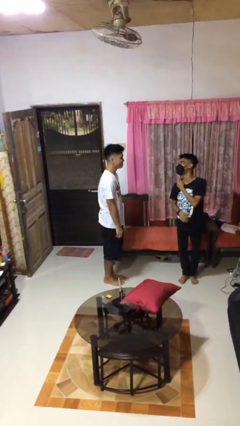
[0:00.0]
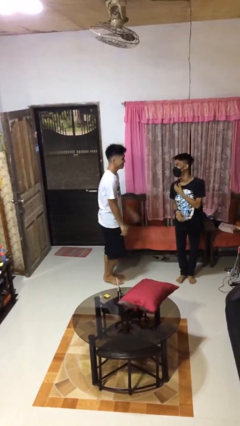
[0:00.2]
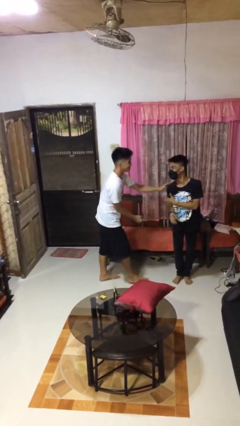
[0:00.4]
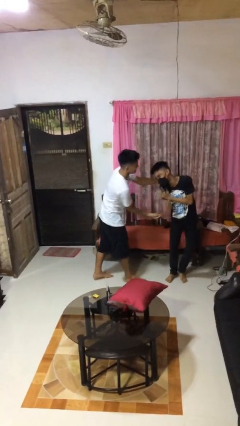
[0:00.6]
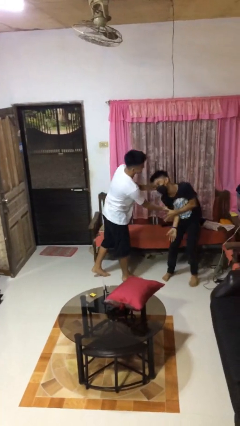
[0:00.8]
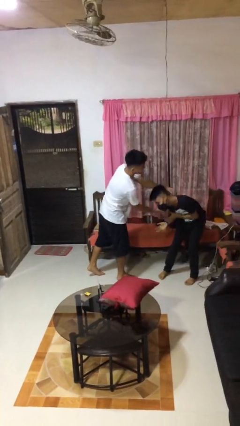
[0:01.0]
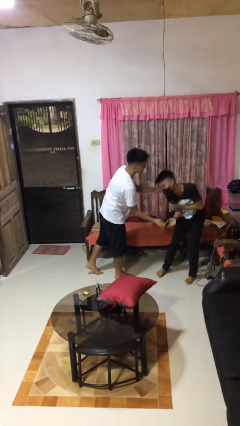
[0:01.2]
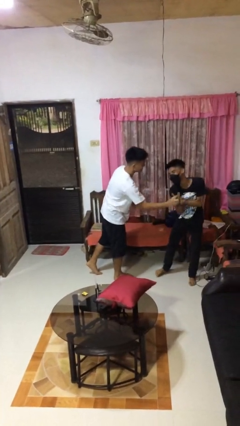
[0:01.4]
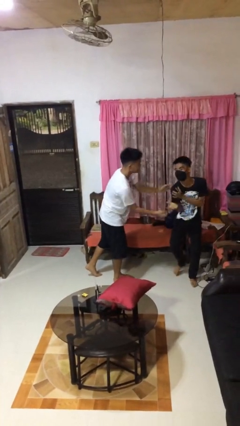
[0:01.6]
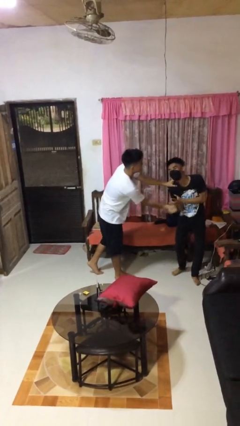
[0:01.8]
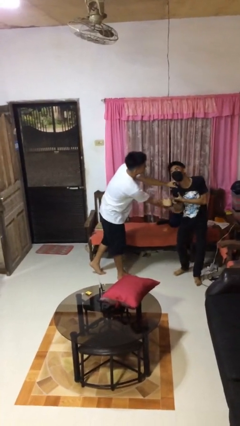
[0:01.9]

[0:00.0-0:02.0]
person tickles person

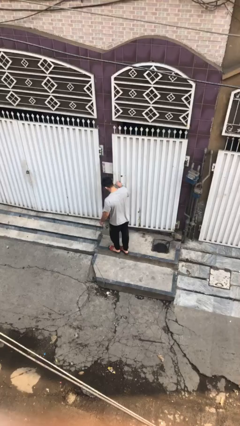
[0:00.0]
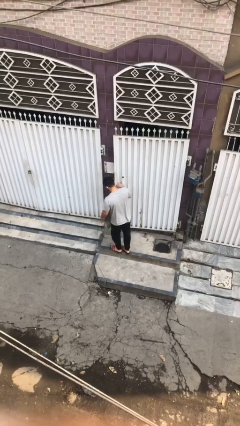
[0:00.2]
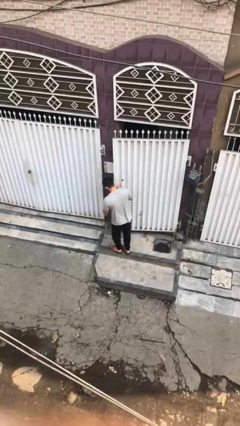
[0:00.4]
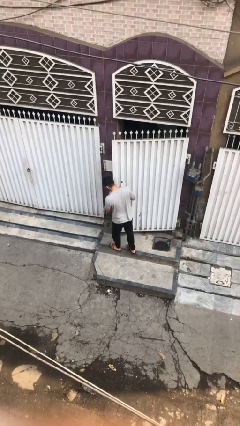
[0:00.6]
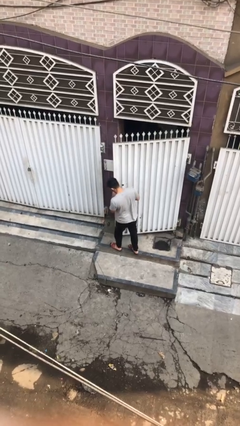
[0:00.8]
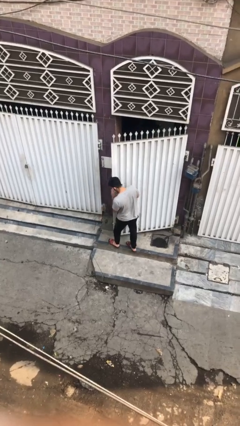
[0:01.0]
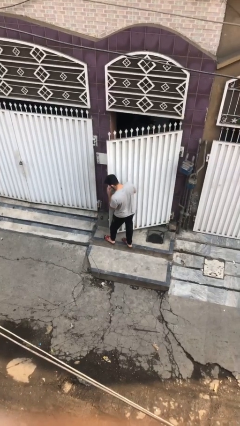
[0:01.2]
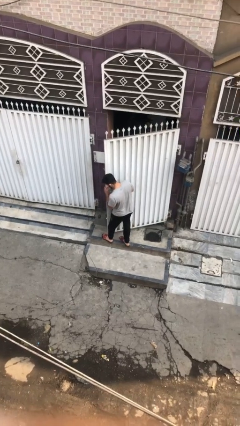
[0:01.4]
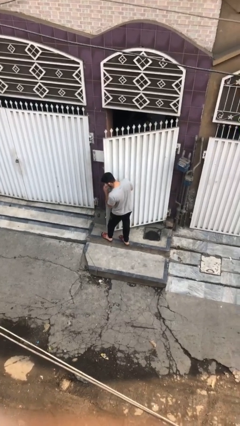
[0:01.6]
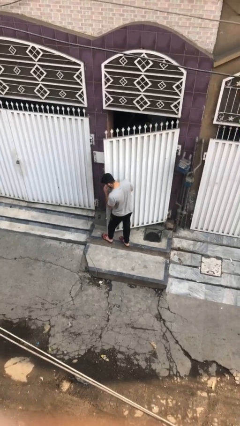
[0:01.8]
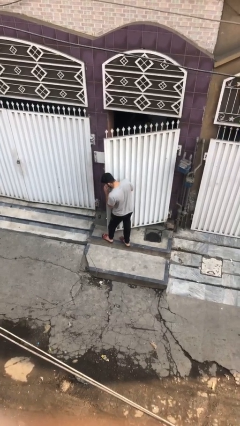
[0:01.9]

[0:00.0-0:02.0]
person opens facility door

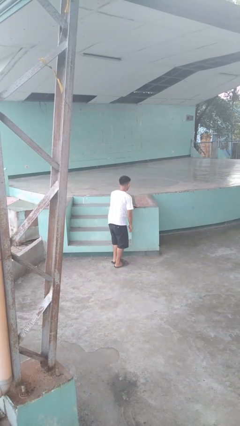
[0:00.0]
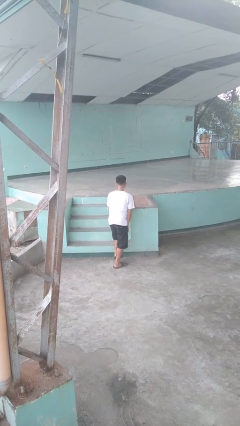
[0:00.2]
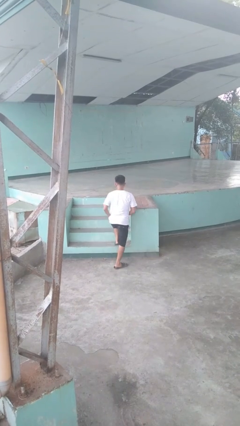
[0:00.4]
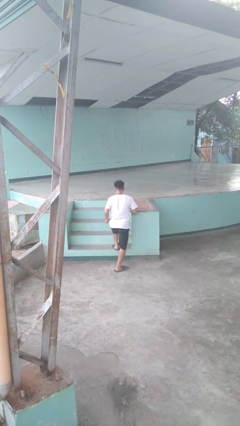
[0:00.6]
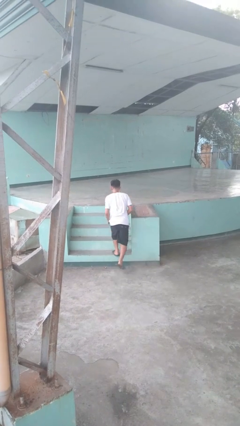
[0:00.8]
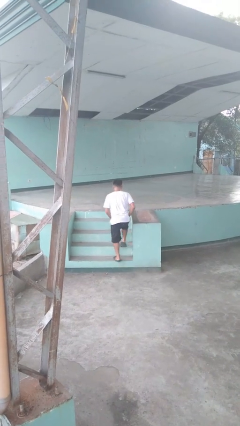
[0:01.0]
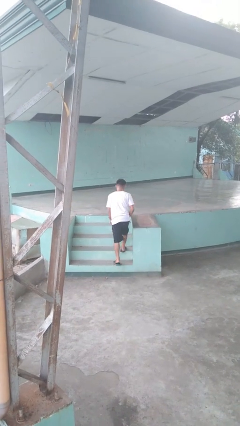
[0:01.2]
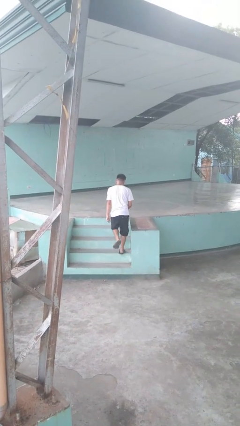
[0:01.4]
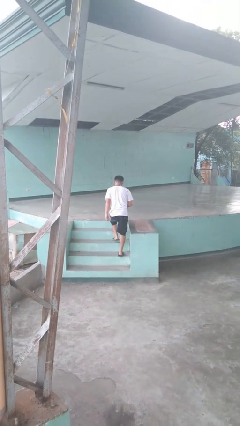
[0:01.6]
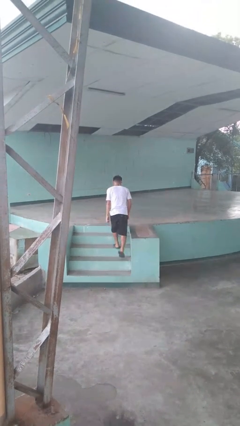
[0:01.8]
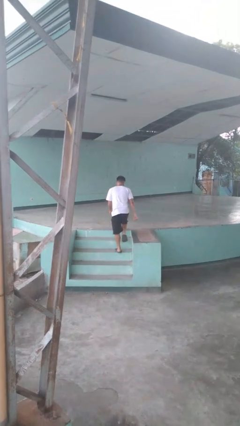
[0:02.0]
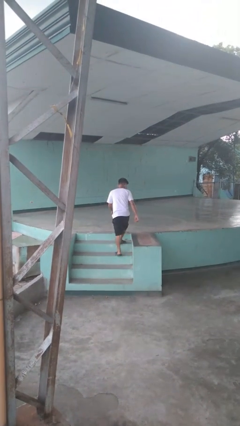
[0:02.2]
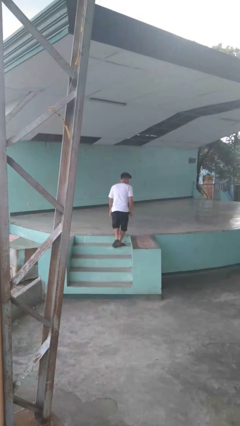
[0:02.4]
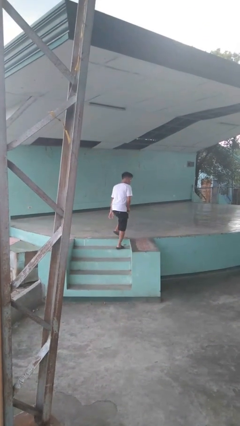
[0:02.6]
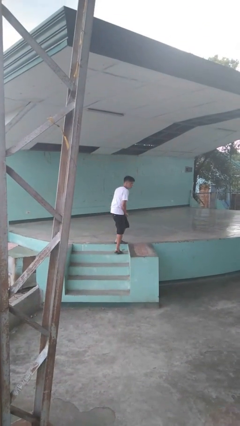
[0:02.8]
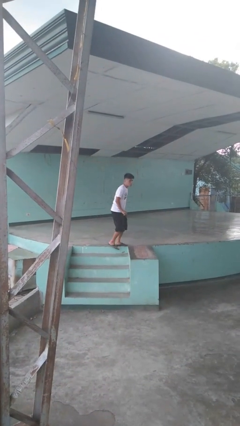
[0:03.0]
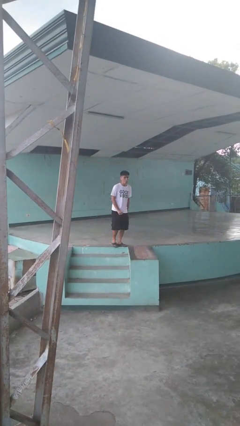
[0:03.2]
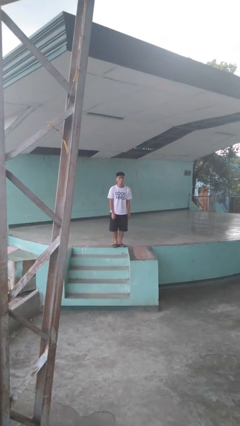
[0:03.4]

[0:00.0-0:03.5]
person climbs up stairs

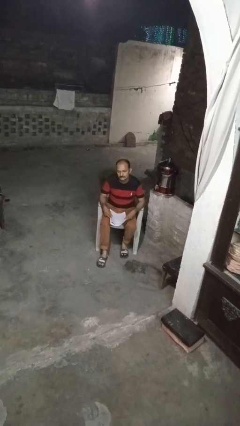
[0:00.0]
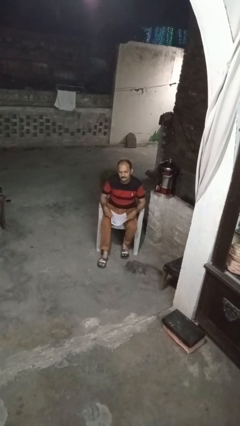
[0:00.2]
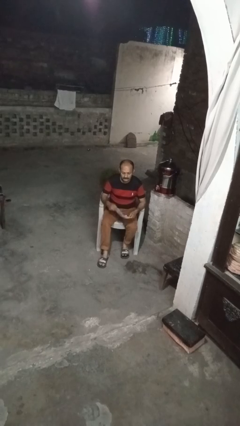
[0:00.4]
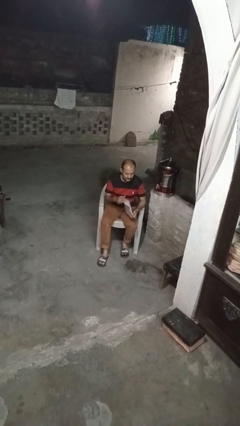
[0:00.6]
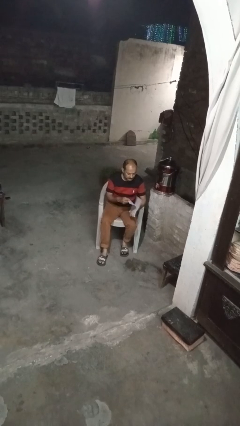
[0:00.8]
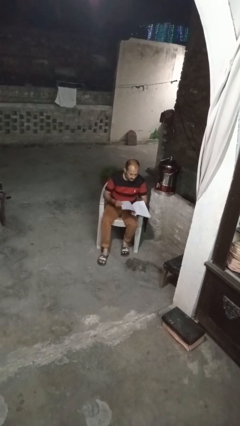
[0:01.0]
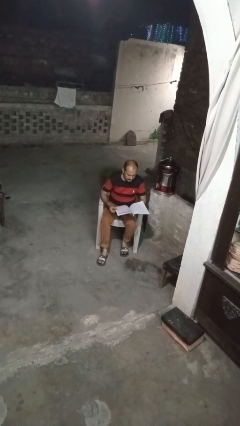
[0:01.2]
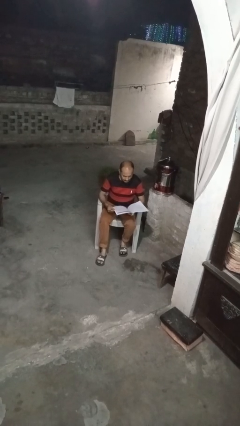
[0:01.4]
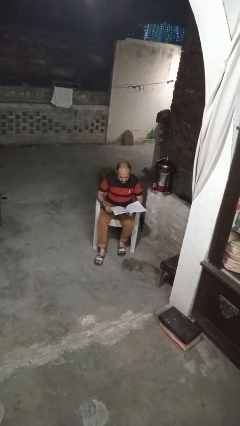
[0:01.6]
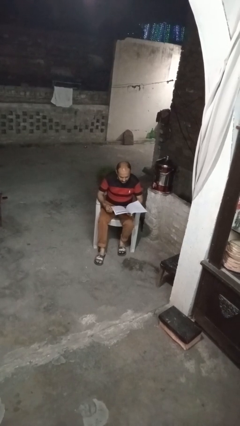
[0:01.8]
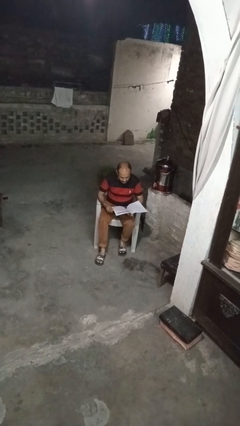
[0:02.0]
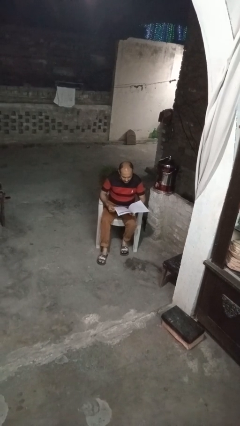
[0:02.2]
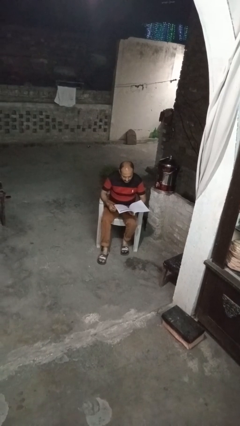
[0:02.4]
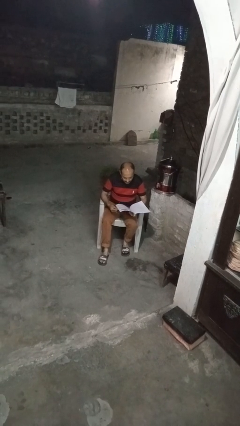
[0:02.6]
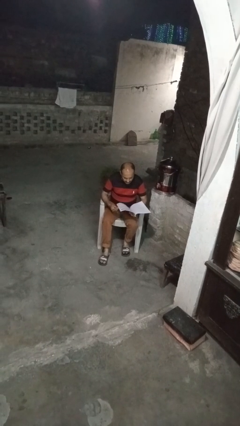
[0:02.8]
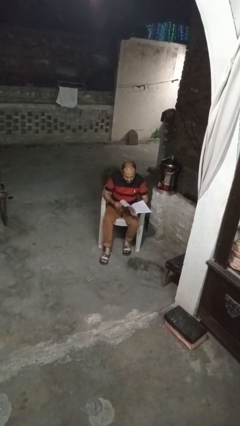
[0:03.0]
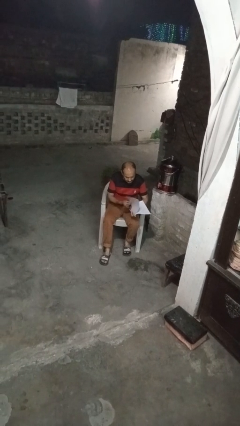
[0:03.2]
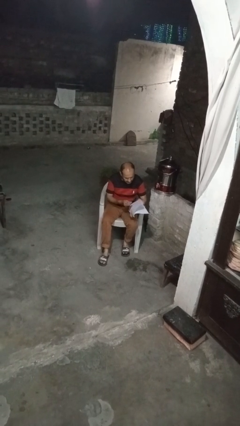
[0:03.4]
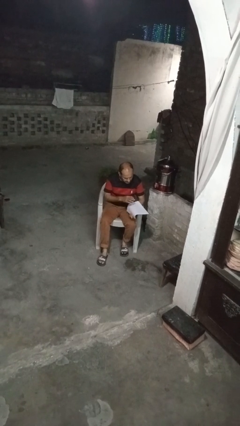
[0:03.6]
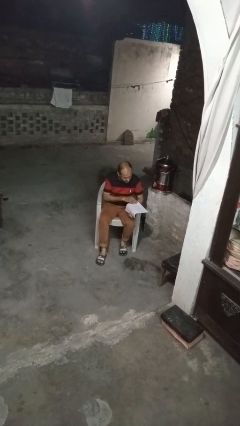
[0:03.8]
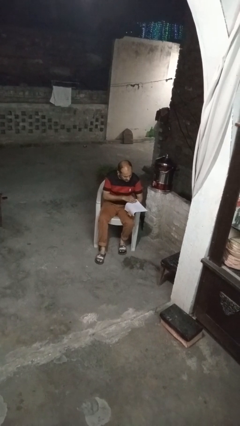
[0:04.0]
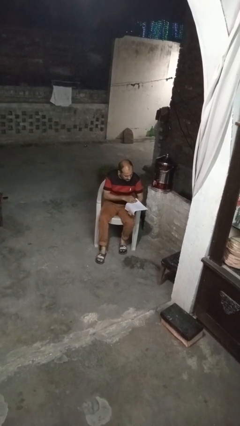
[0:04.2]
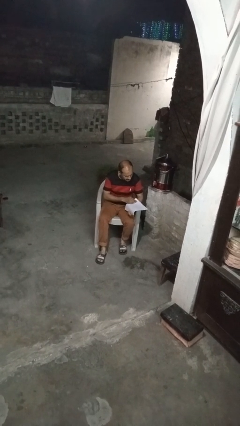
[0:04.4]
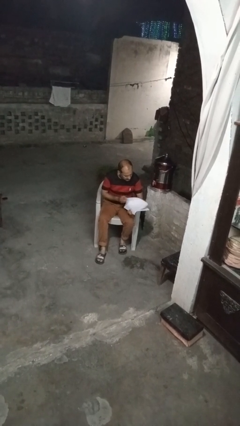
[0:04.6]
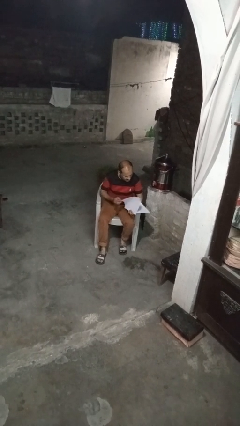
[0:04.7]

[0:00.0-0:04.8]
person reads magazine

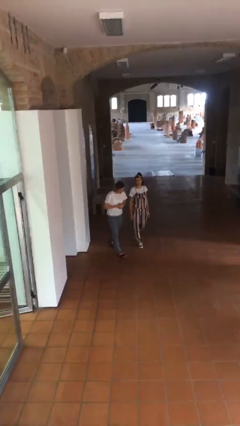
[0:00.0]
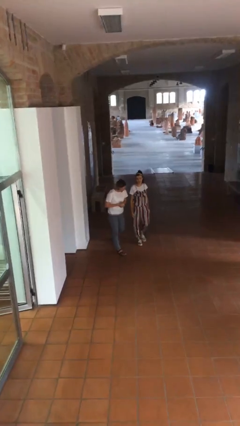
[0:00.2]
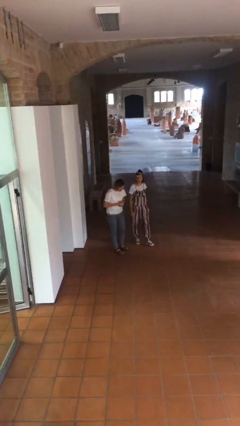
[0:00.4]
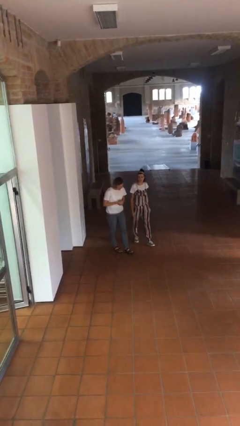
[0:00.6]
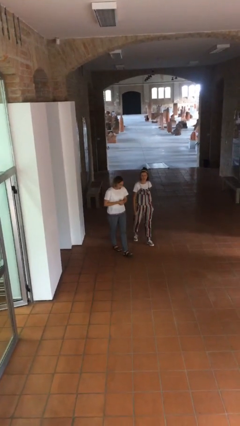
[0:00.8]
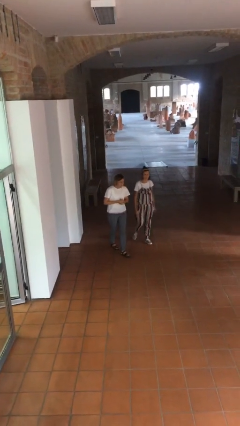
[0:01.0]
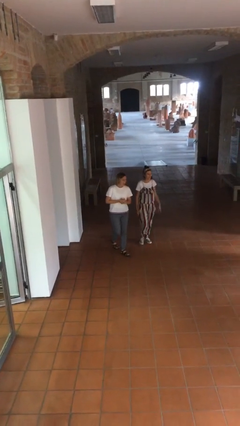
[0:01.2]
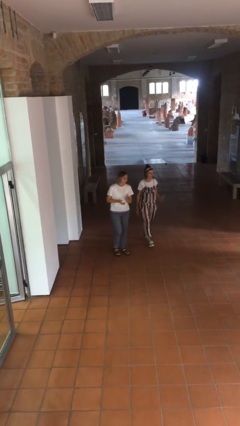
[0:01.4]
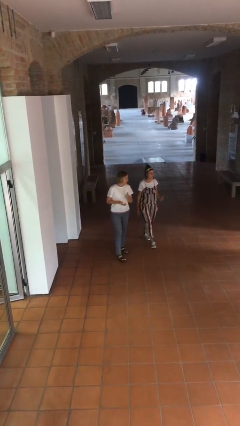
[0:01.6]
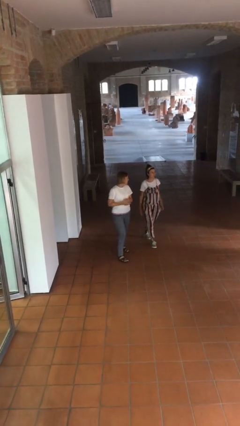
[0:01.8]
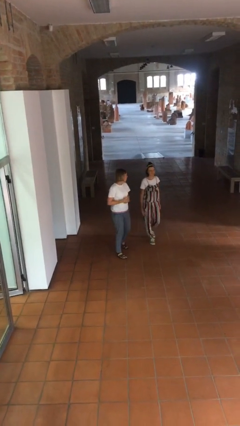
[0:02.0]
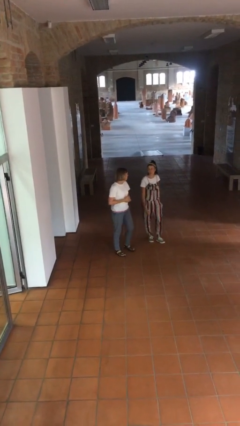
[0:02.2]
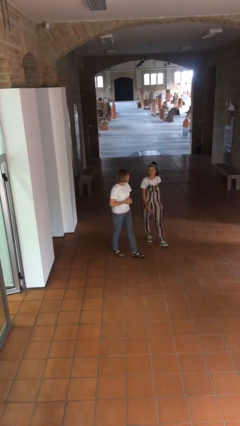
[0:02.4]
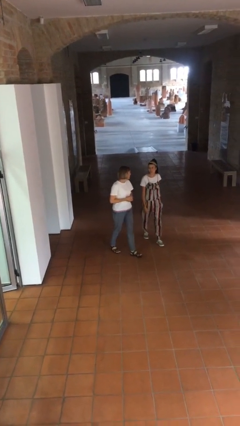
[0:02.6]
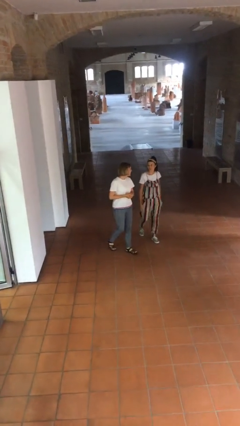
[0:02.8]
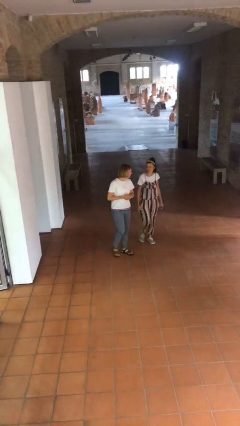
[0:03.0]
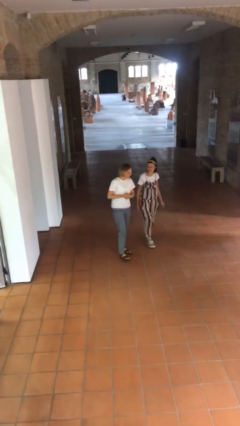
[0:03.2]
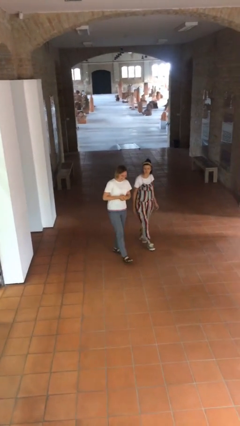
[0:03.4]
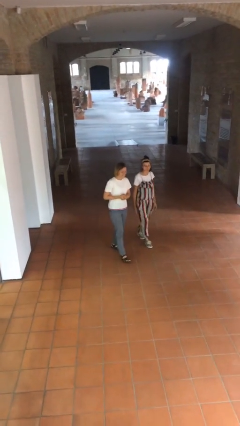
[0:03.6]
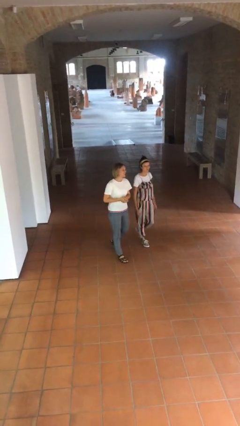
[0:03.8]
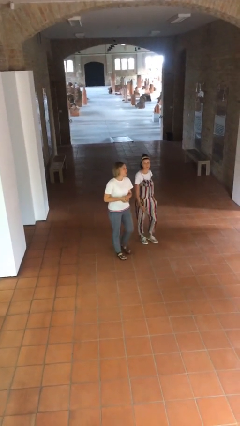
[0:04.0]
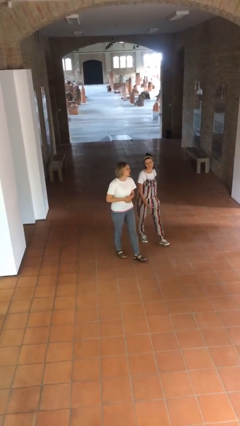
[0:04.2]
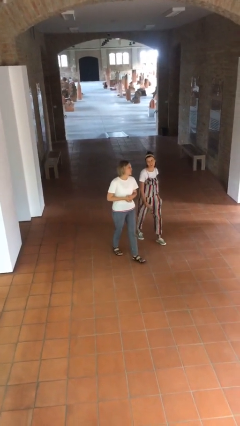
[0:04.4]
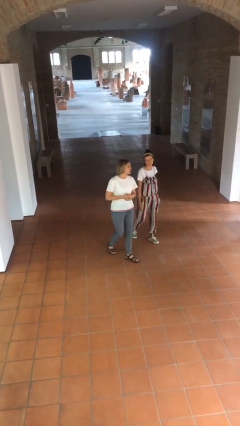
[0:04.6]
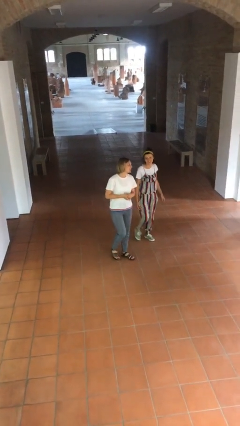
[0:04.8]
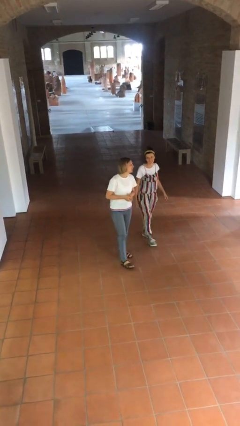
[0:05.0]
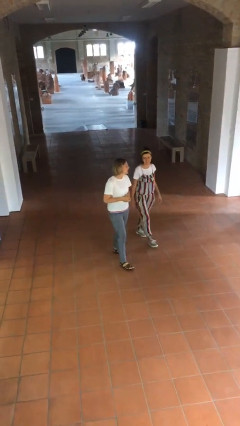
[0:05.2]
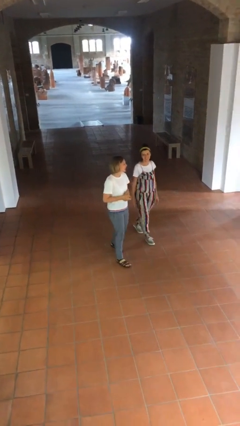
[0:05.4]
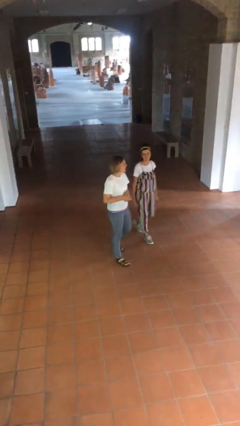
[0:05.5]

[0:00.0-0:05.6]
person talks to person
